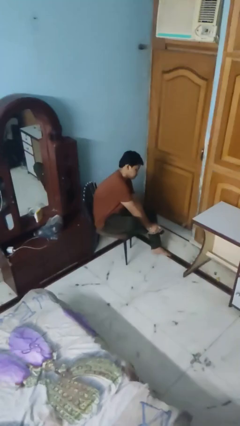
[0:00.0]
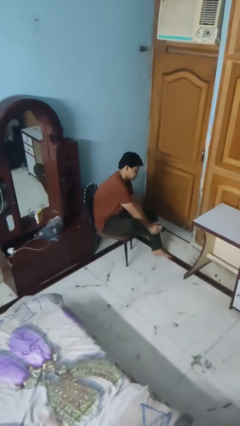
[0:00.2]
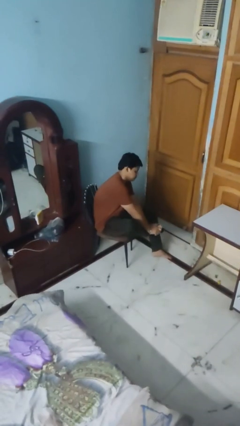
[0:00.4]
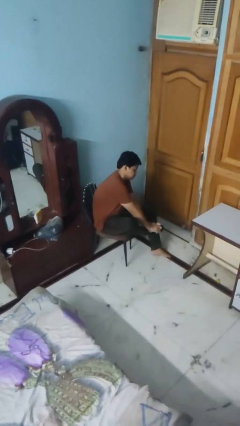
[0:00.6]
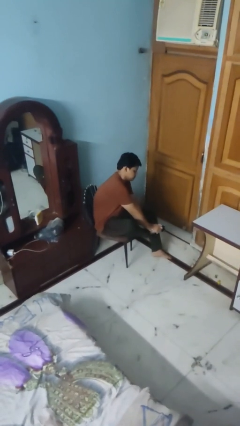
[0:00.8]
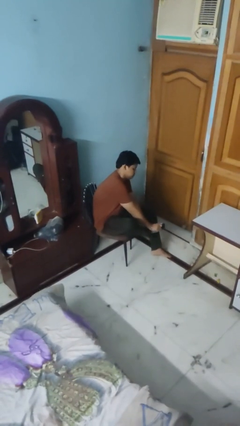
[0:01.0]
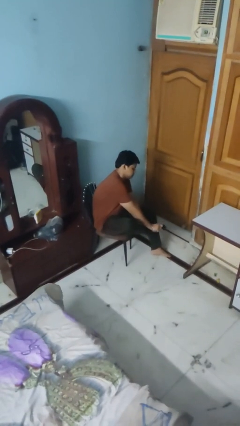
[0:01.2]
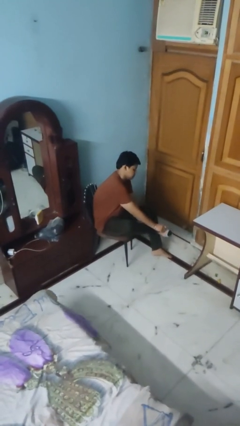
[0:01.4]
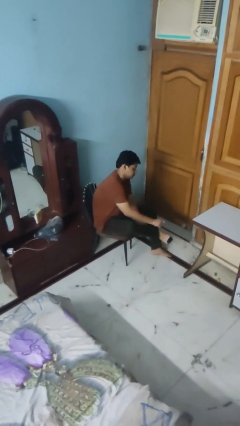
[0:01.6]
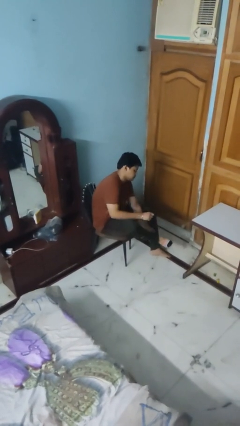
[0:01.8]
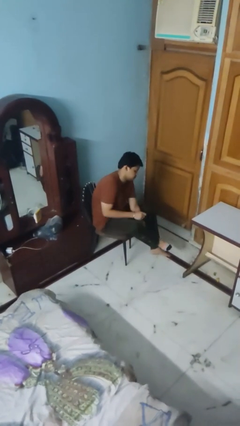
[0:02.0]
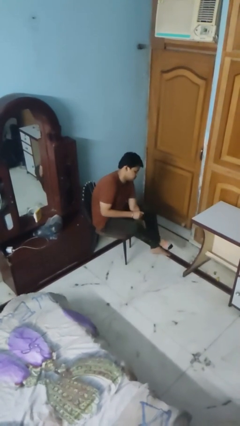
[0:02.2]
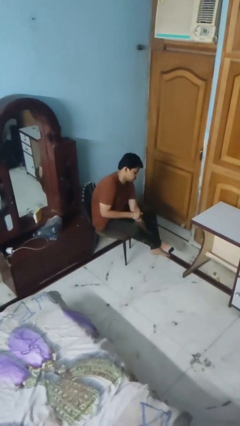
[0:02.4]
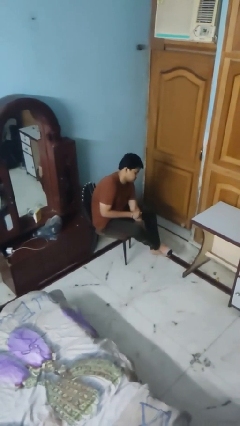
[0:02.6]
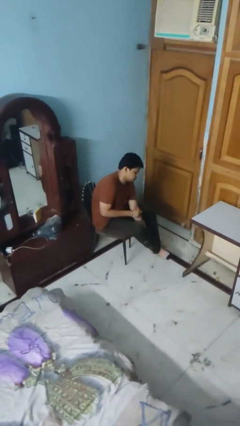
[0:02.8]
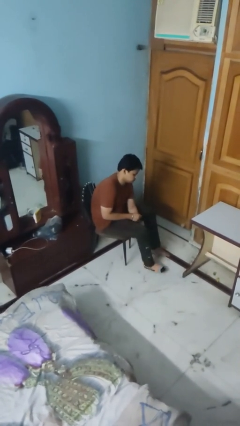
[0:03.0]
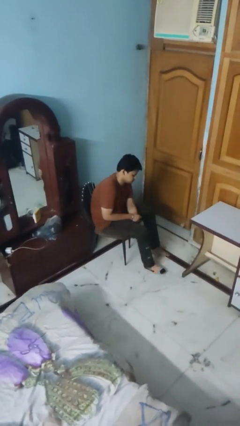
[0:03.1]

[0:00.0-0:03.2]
person puts on socks

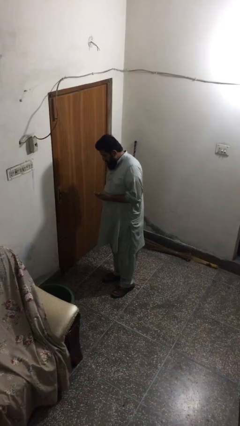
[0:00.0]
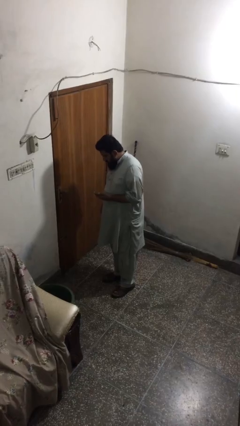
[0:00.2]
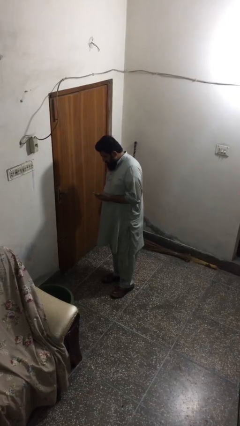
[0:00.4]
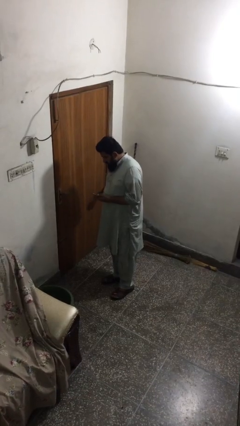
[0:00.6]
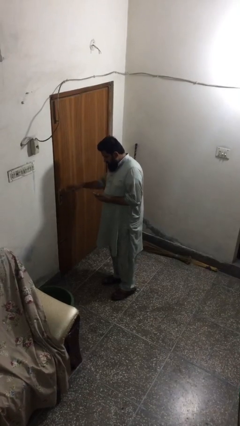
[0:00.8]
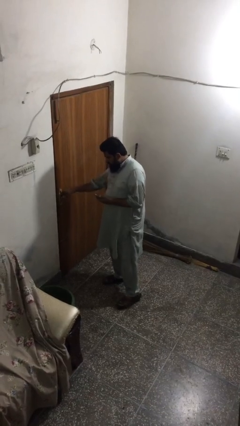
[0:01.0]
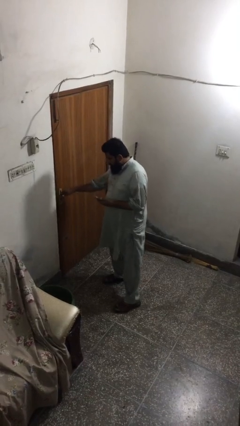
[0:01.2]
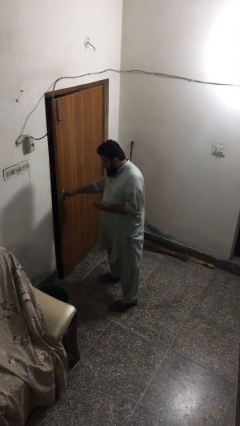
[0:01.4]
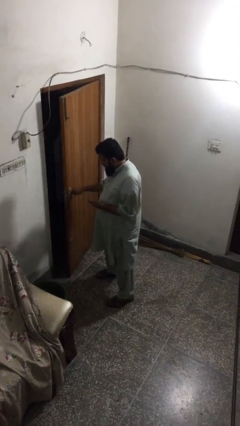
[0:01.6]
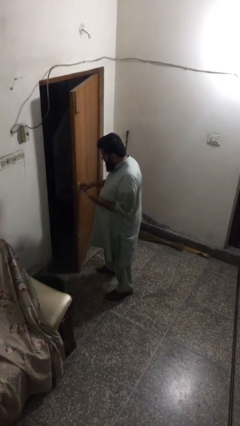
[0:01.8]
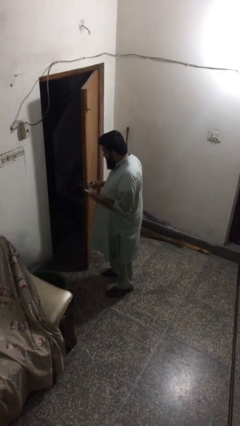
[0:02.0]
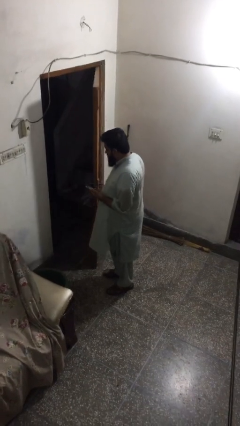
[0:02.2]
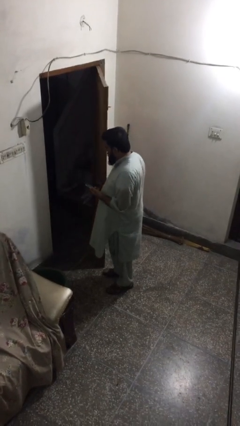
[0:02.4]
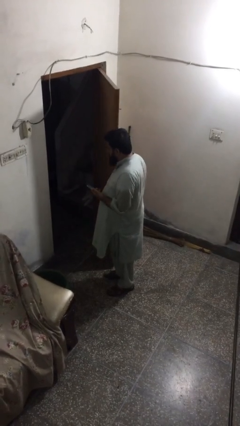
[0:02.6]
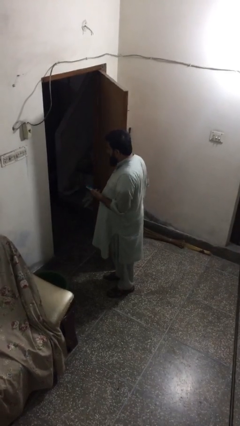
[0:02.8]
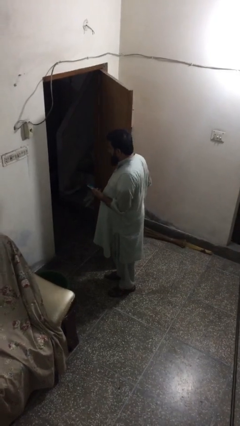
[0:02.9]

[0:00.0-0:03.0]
person opens facility door

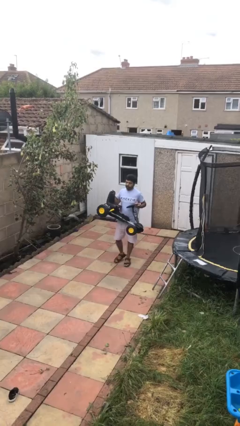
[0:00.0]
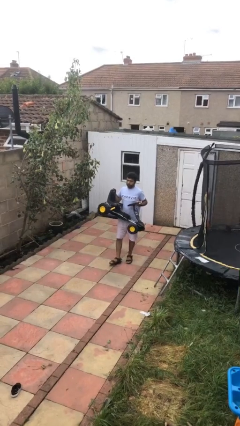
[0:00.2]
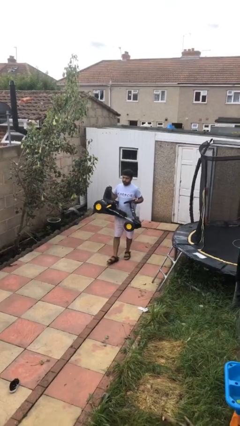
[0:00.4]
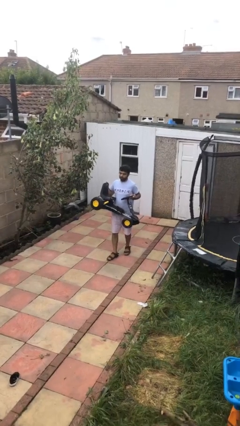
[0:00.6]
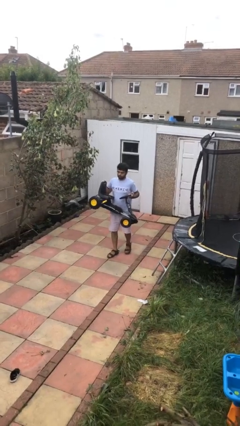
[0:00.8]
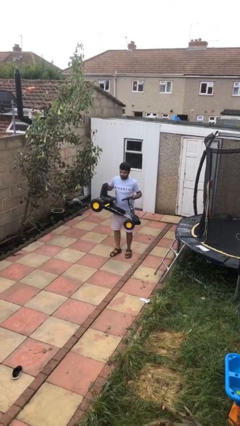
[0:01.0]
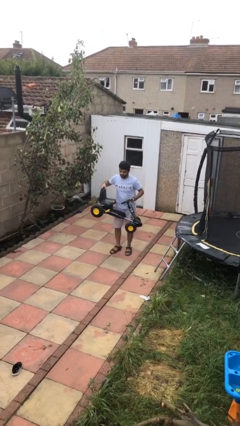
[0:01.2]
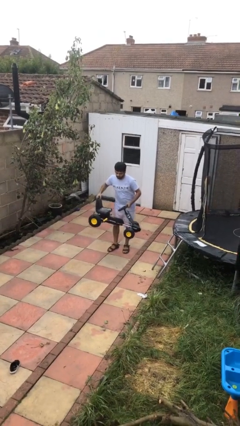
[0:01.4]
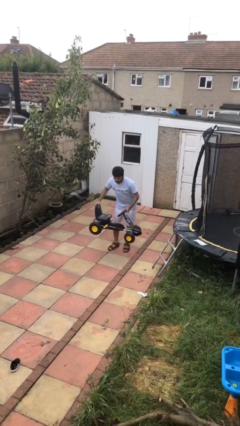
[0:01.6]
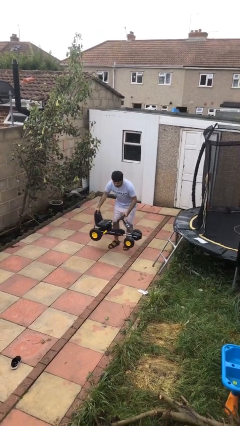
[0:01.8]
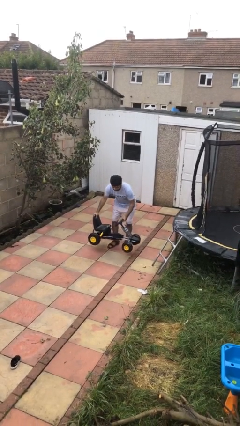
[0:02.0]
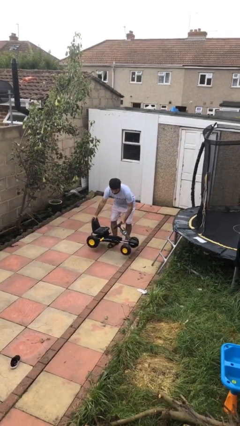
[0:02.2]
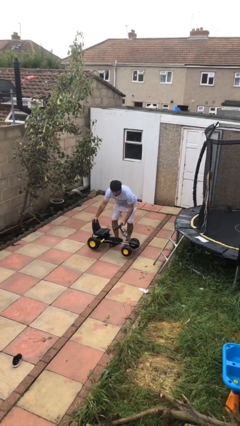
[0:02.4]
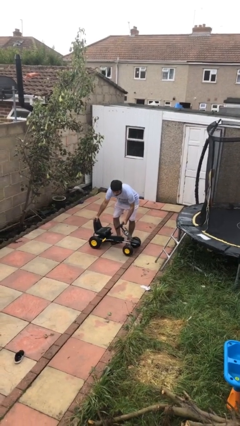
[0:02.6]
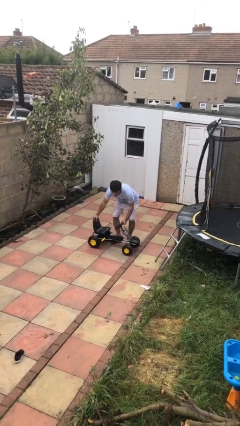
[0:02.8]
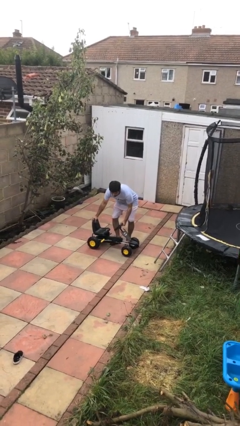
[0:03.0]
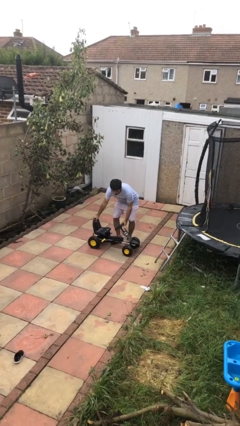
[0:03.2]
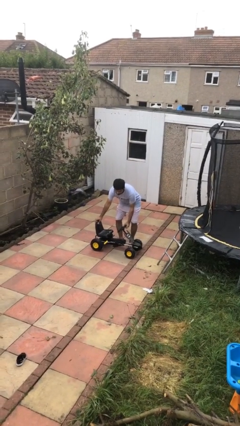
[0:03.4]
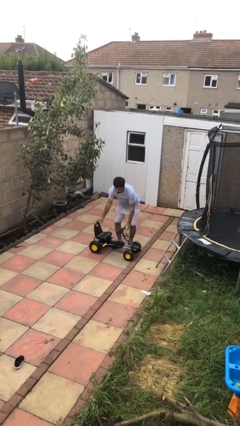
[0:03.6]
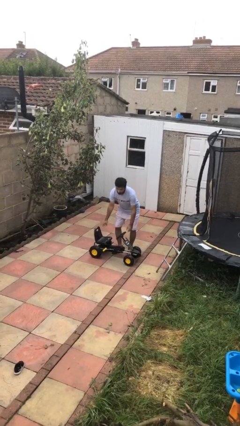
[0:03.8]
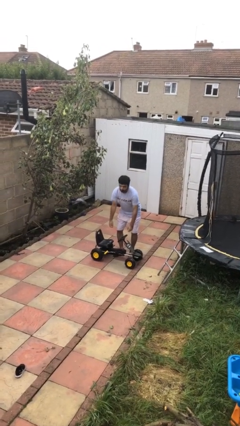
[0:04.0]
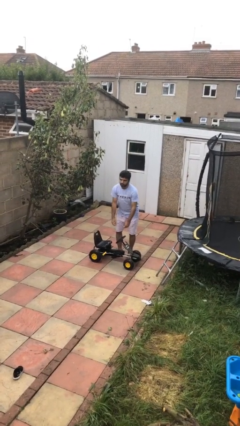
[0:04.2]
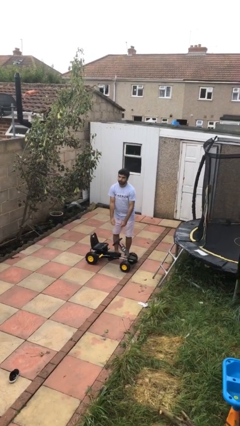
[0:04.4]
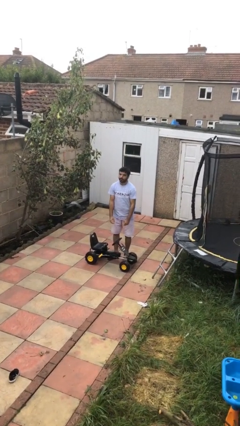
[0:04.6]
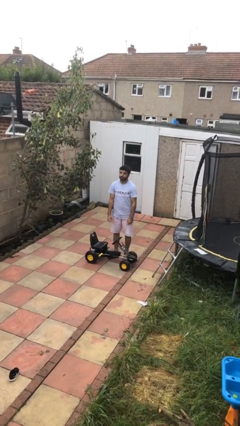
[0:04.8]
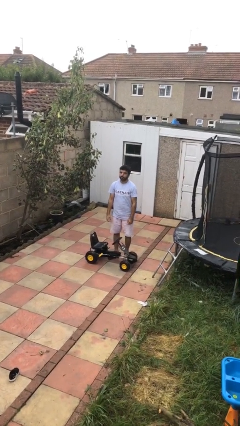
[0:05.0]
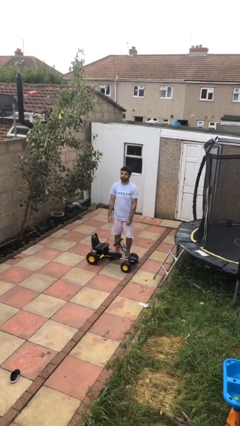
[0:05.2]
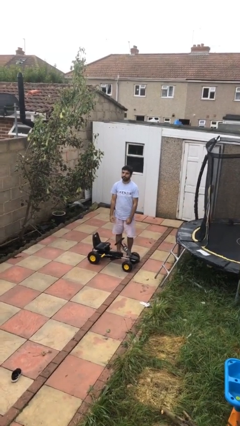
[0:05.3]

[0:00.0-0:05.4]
person puts down object on floor

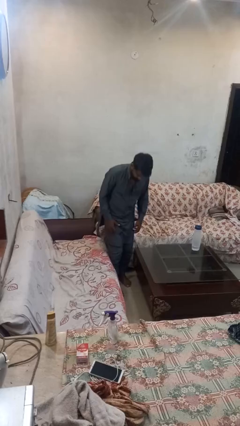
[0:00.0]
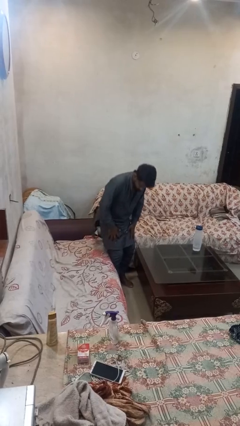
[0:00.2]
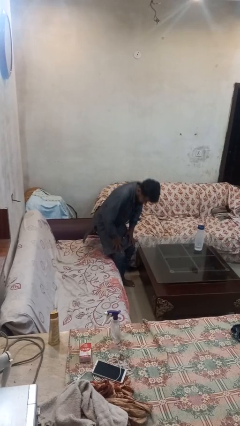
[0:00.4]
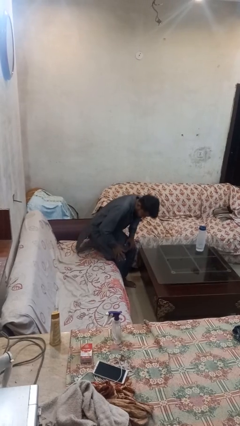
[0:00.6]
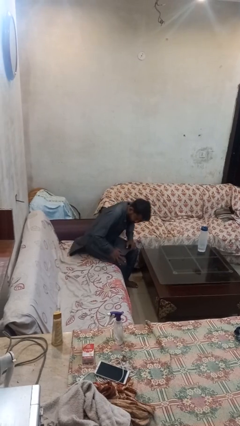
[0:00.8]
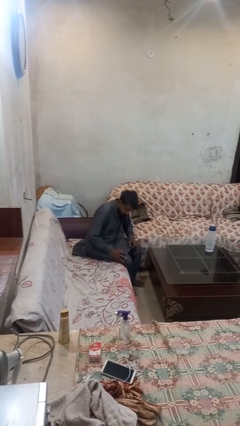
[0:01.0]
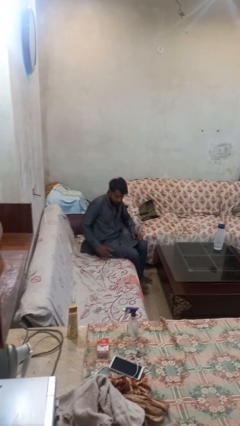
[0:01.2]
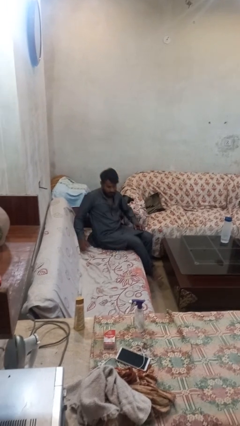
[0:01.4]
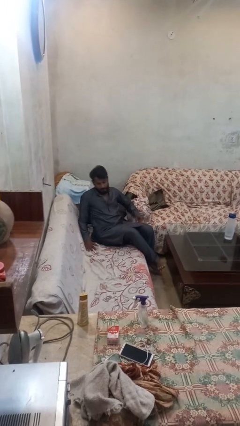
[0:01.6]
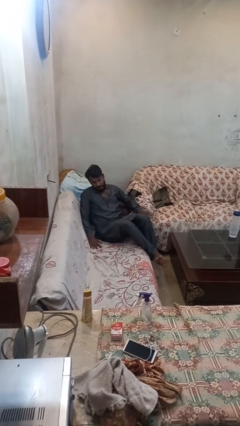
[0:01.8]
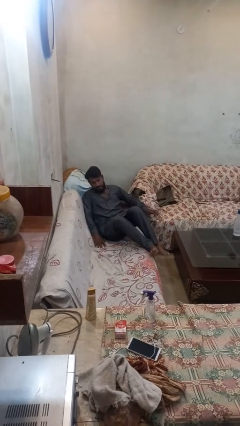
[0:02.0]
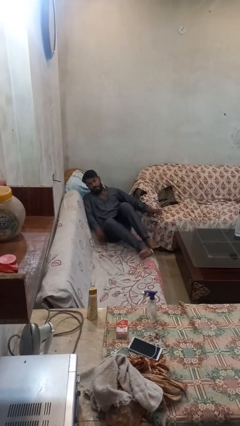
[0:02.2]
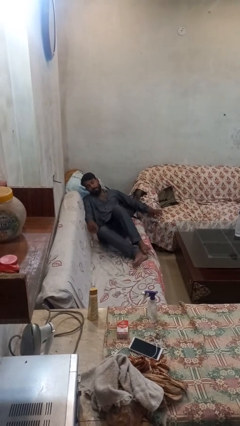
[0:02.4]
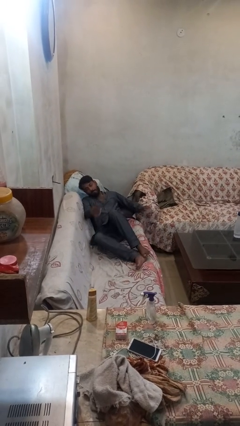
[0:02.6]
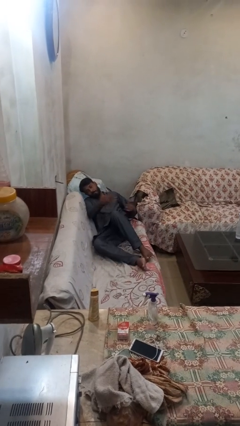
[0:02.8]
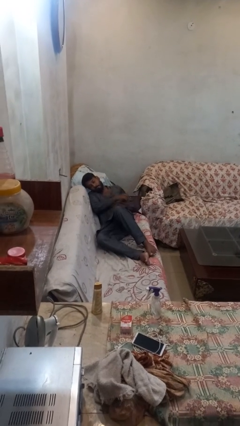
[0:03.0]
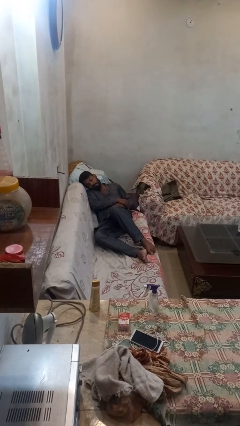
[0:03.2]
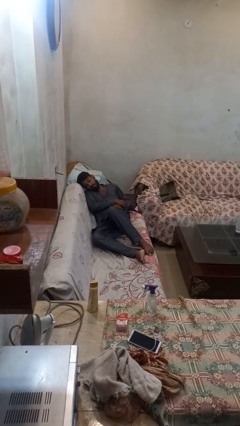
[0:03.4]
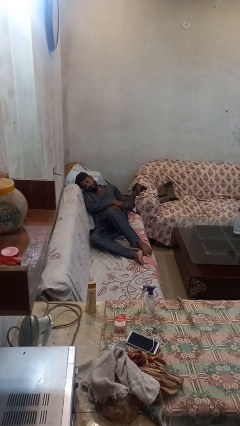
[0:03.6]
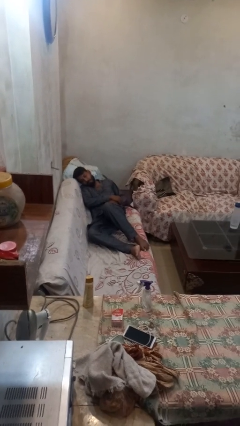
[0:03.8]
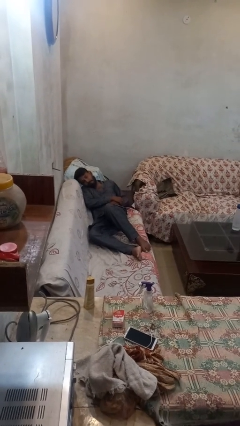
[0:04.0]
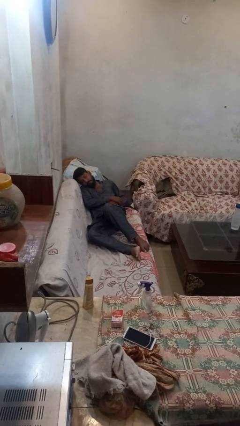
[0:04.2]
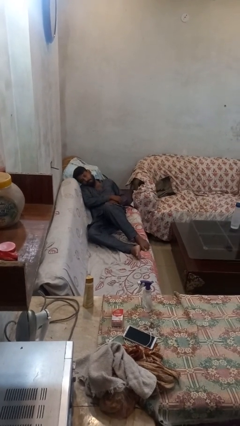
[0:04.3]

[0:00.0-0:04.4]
person lies down on couch

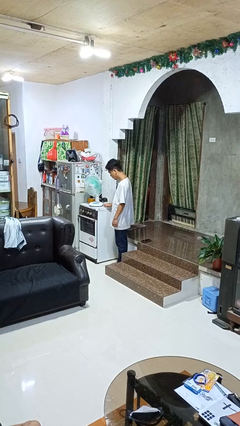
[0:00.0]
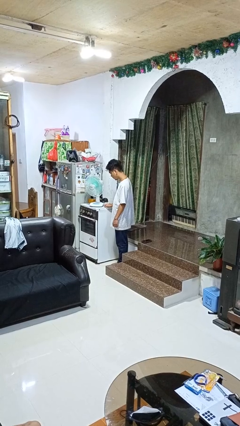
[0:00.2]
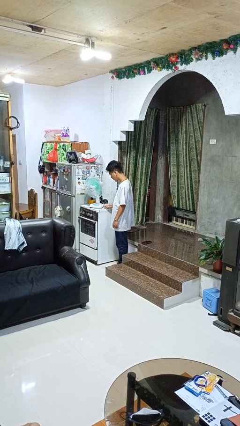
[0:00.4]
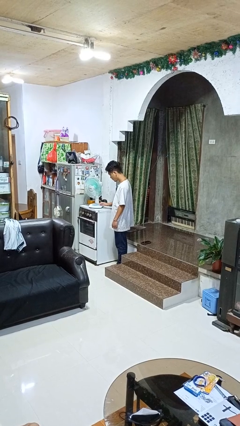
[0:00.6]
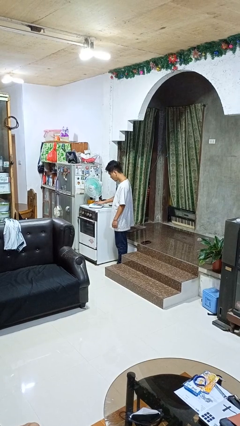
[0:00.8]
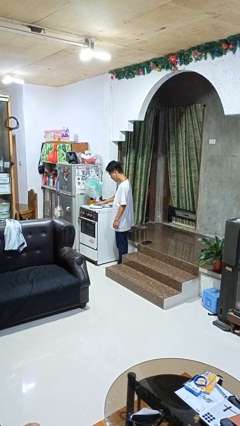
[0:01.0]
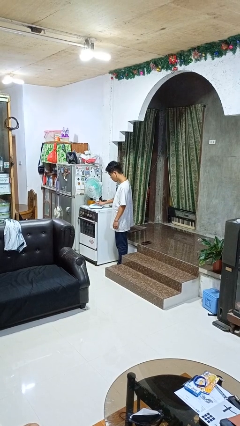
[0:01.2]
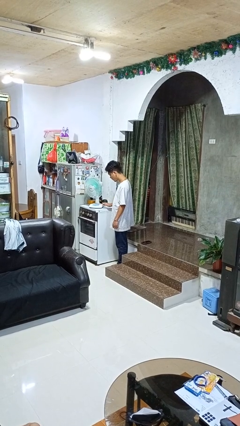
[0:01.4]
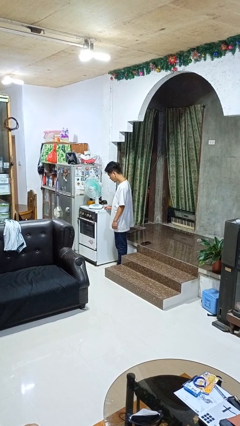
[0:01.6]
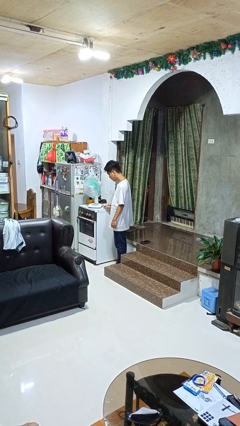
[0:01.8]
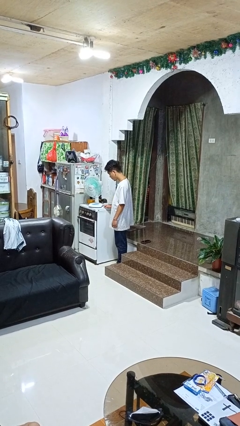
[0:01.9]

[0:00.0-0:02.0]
person turns off fan

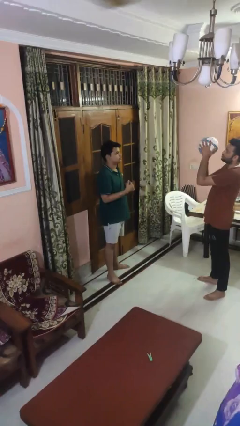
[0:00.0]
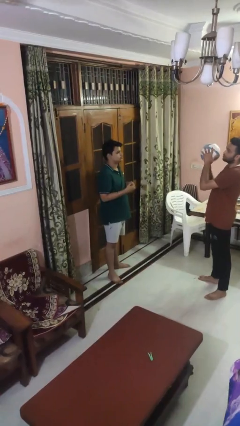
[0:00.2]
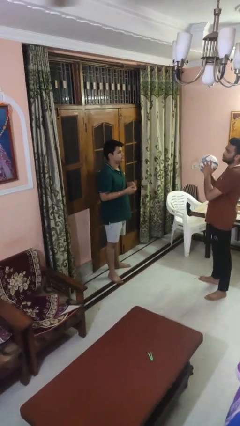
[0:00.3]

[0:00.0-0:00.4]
person throws object to person
